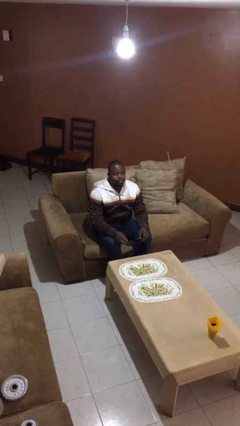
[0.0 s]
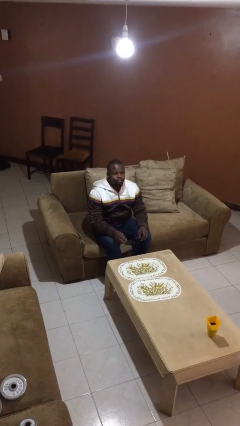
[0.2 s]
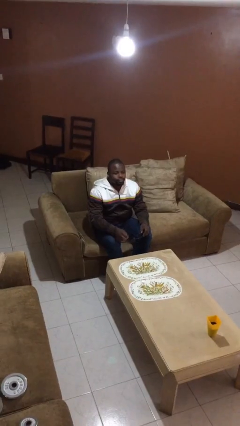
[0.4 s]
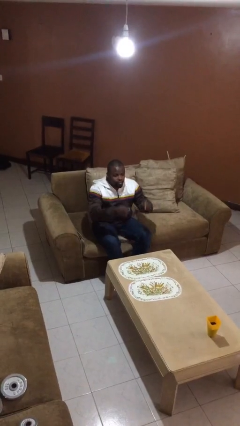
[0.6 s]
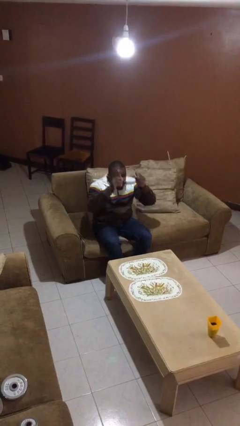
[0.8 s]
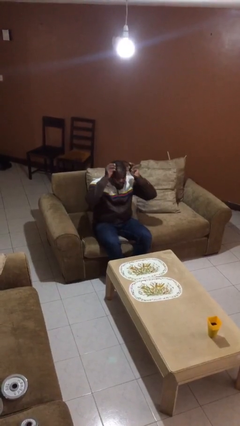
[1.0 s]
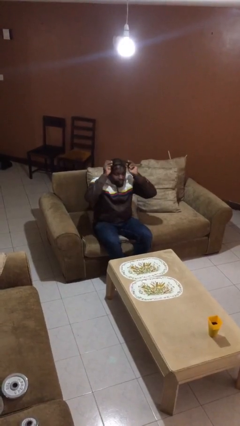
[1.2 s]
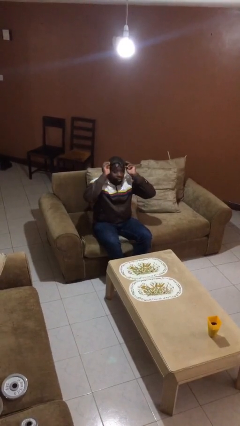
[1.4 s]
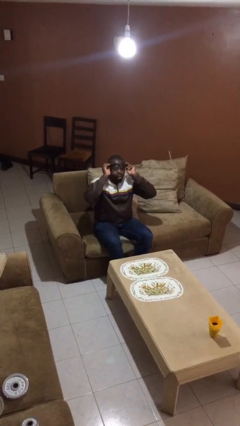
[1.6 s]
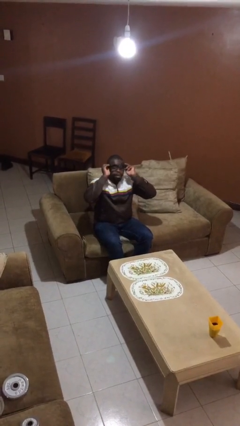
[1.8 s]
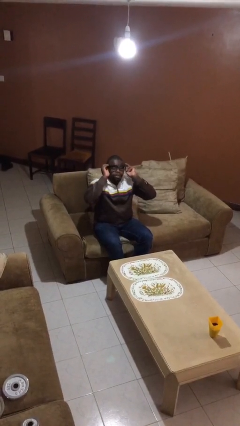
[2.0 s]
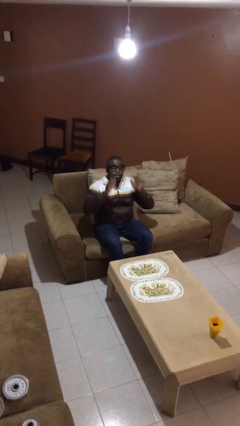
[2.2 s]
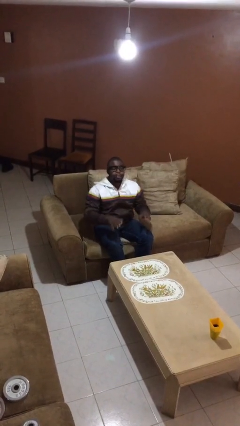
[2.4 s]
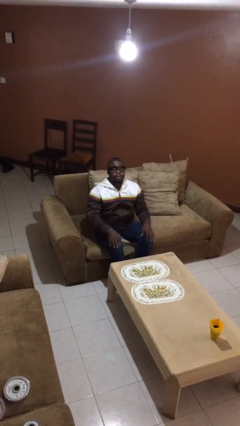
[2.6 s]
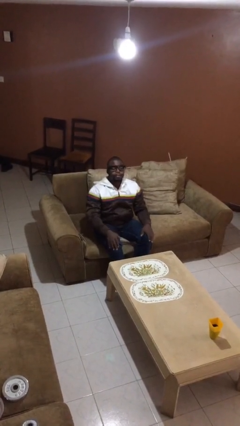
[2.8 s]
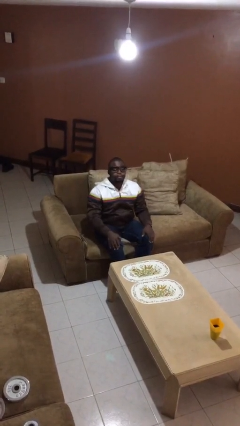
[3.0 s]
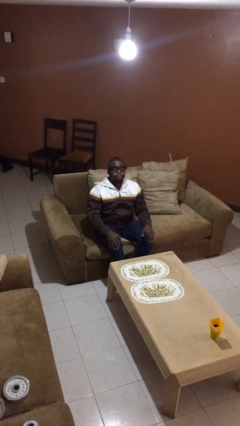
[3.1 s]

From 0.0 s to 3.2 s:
person puts on glasses

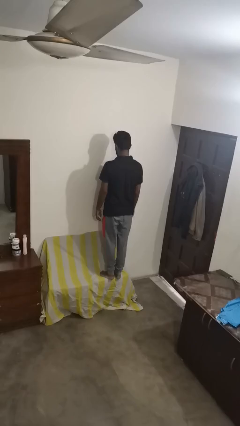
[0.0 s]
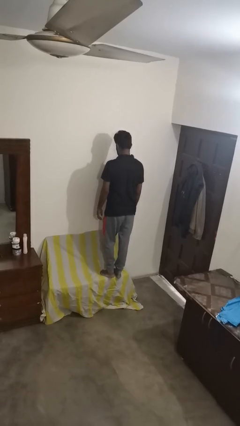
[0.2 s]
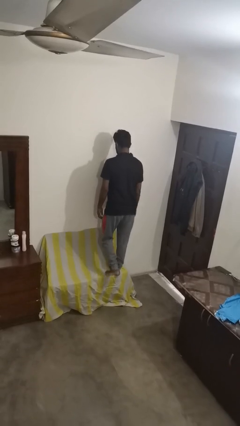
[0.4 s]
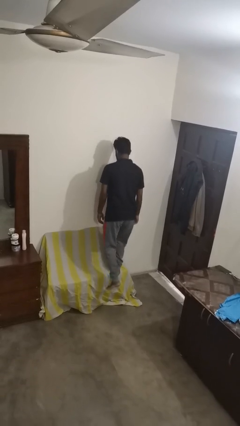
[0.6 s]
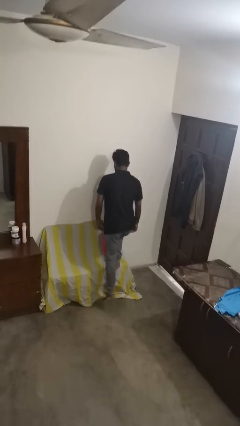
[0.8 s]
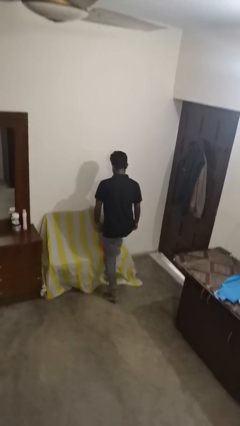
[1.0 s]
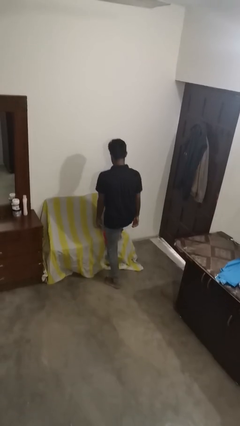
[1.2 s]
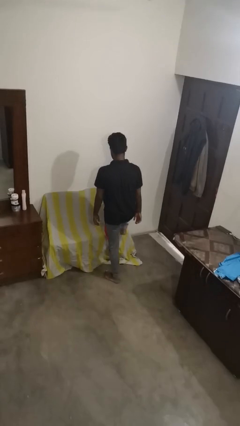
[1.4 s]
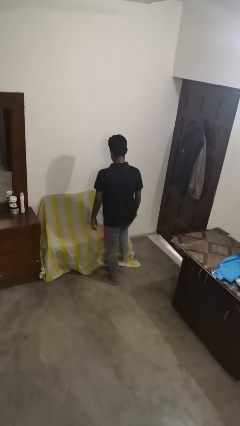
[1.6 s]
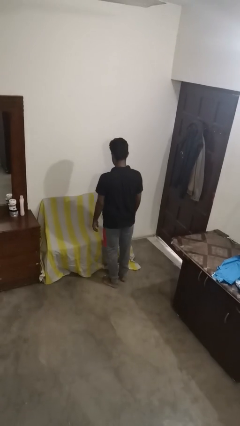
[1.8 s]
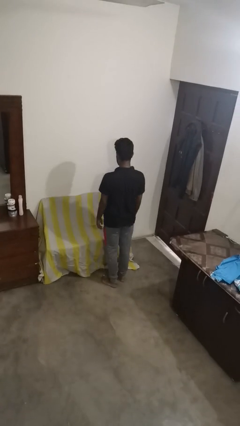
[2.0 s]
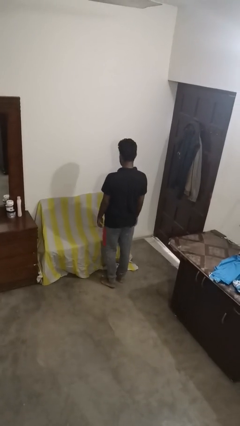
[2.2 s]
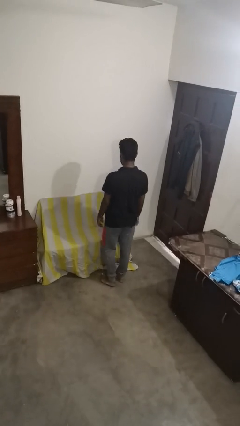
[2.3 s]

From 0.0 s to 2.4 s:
person climbs off couch

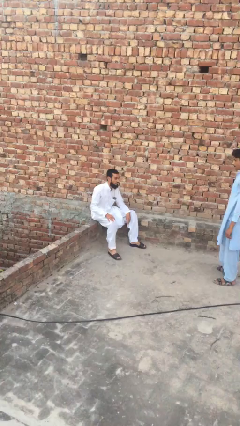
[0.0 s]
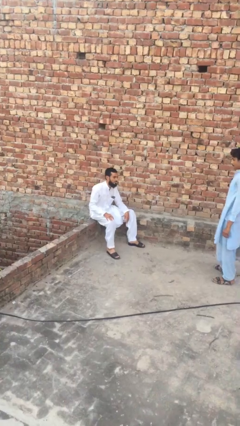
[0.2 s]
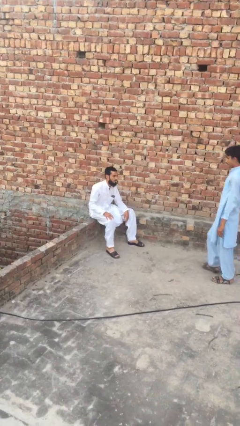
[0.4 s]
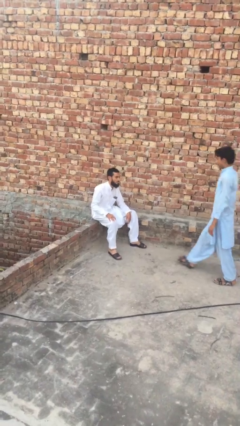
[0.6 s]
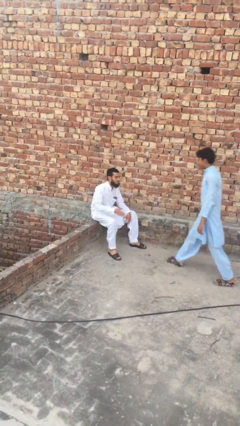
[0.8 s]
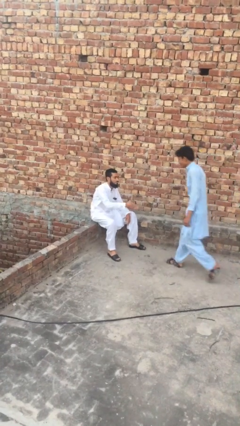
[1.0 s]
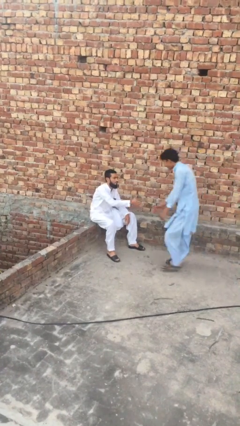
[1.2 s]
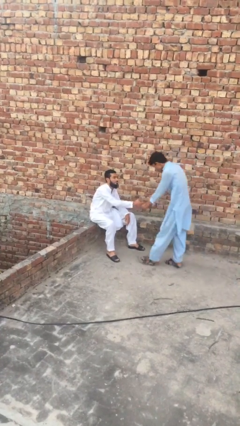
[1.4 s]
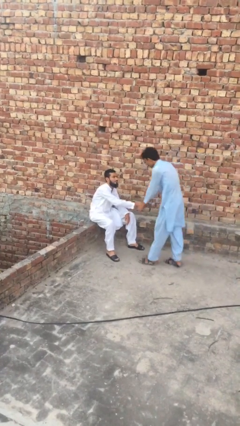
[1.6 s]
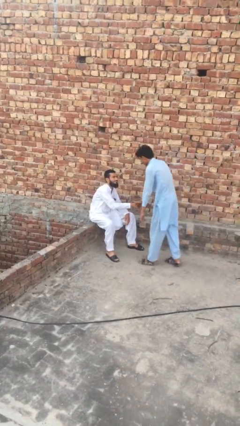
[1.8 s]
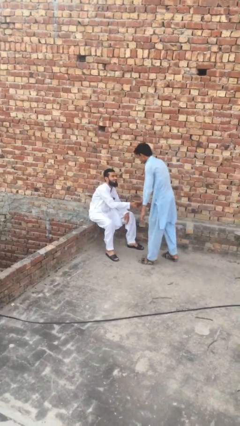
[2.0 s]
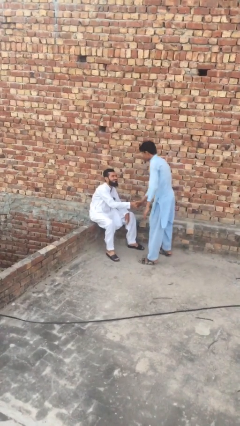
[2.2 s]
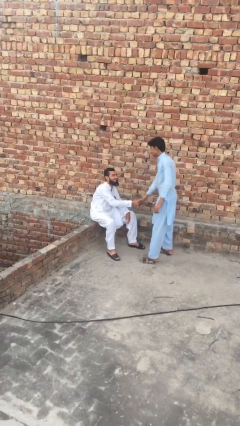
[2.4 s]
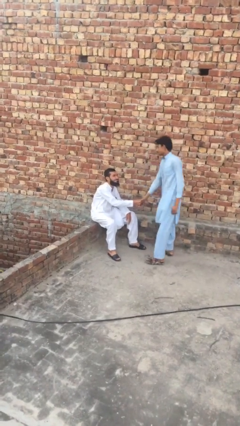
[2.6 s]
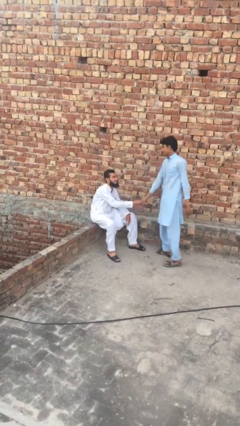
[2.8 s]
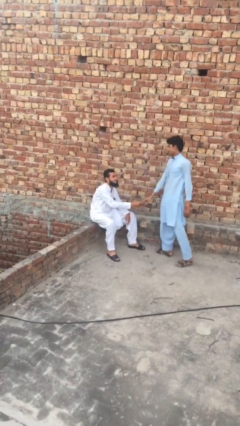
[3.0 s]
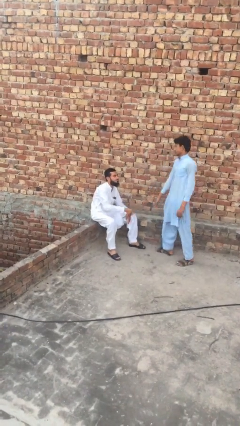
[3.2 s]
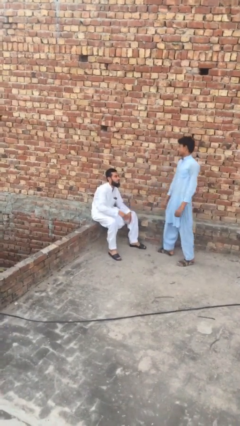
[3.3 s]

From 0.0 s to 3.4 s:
person shakes hand

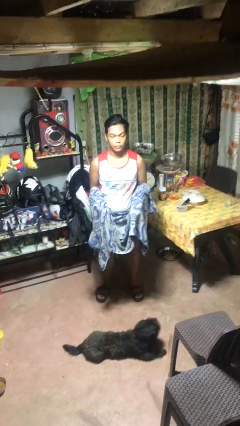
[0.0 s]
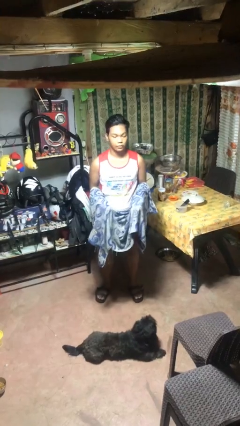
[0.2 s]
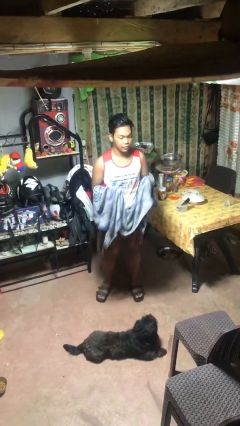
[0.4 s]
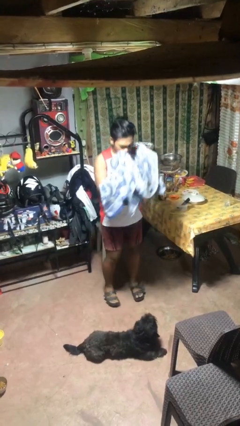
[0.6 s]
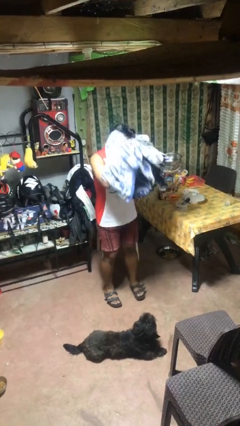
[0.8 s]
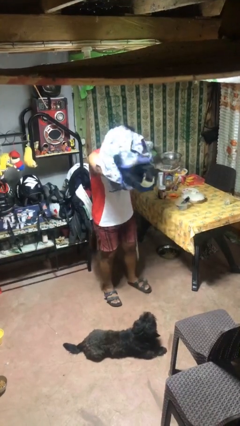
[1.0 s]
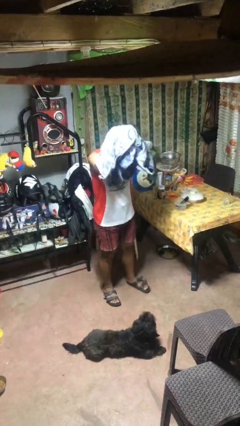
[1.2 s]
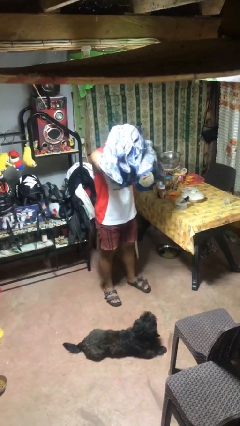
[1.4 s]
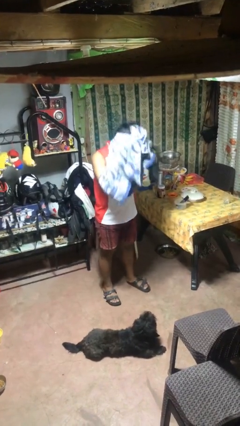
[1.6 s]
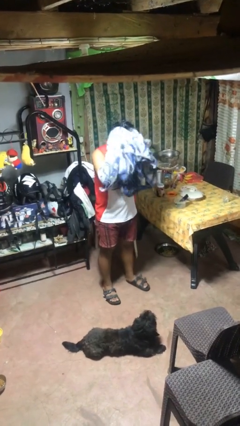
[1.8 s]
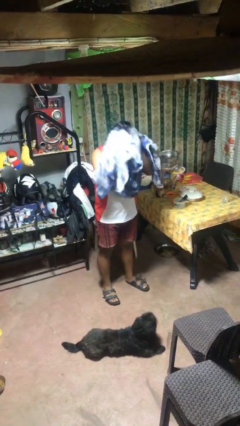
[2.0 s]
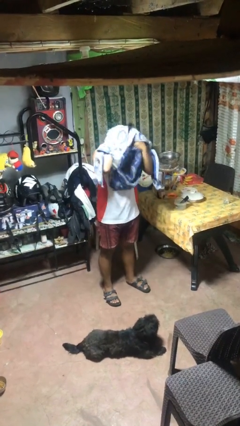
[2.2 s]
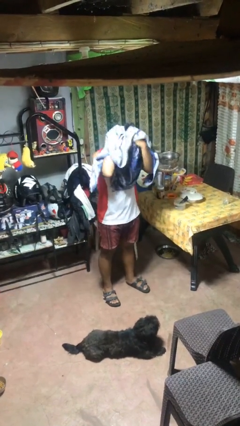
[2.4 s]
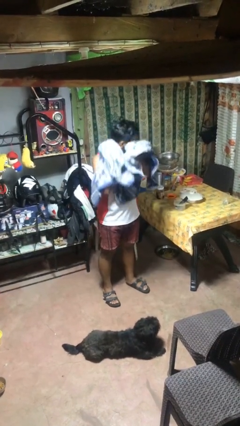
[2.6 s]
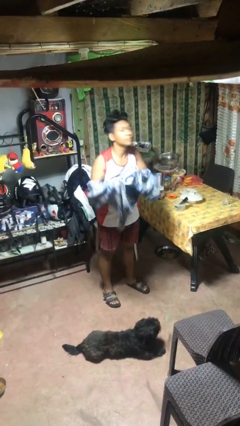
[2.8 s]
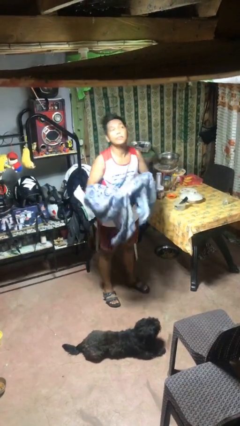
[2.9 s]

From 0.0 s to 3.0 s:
person dries hair with towel

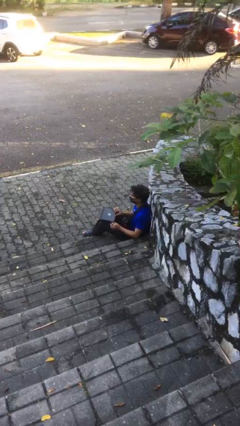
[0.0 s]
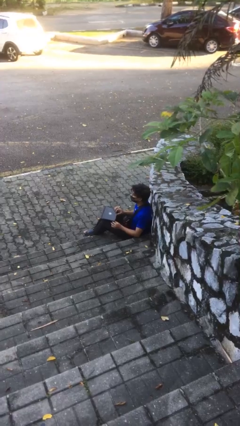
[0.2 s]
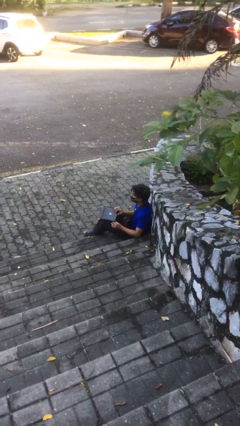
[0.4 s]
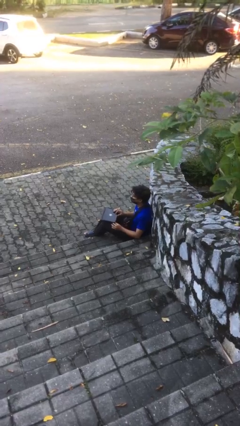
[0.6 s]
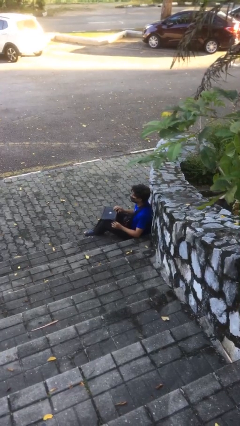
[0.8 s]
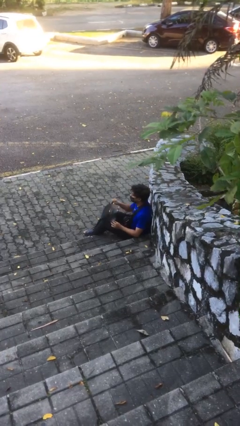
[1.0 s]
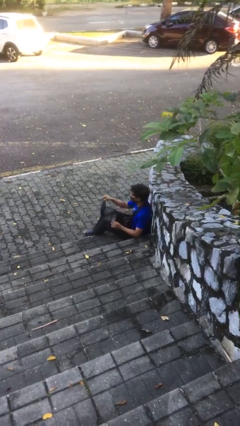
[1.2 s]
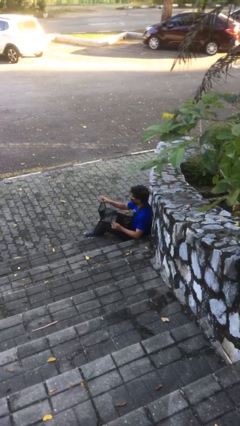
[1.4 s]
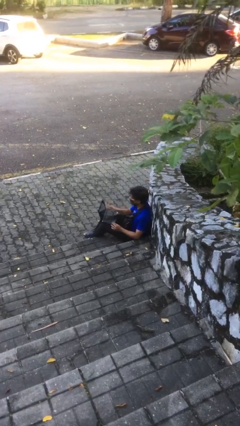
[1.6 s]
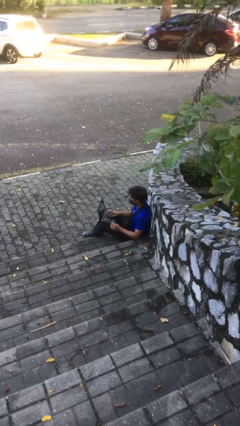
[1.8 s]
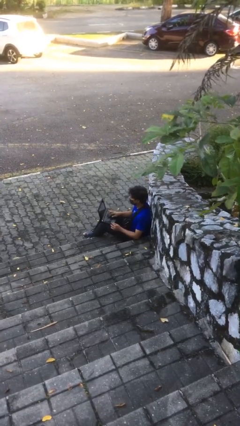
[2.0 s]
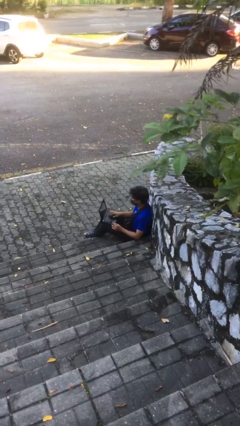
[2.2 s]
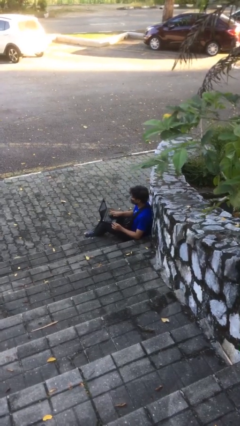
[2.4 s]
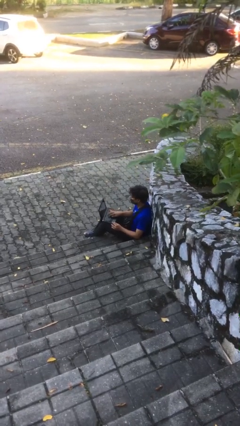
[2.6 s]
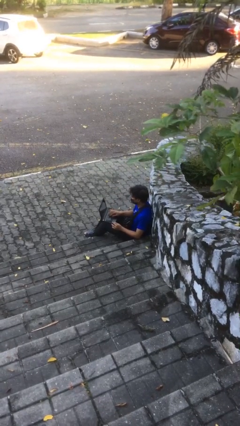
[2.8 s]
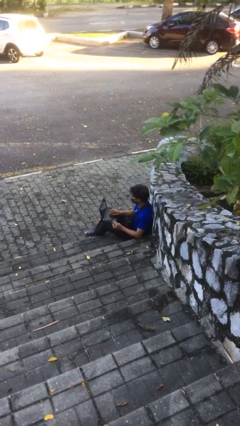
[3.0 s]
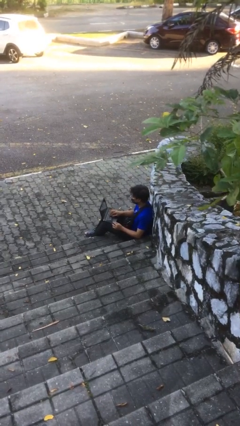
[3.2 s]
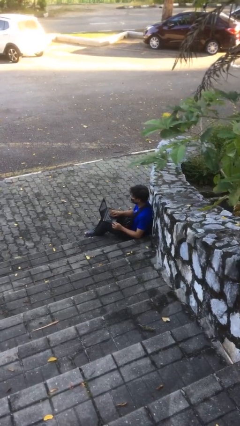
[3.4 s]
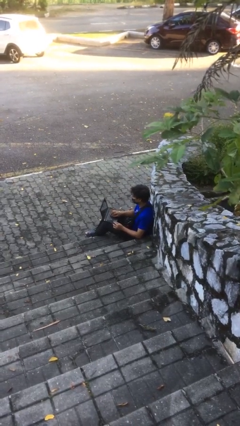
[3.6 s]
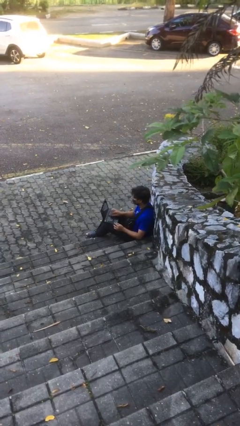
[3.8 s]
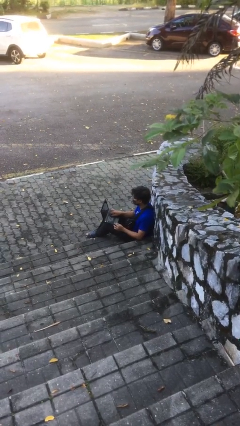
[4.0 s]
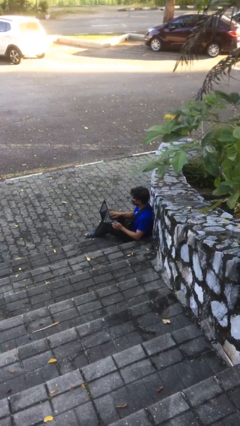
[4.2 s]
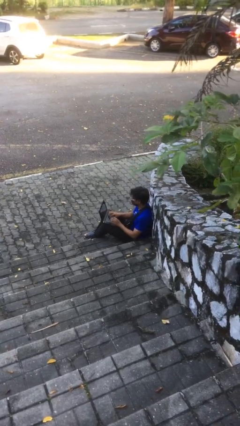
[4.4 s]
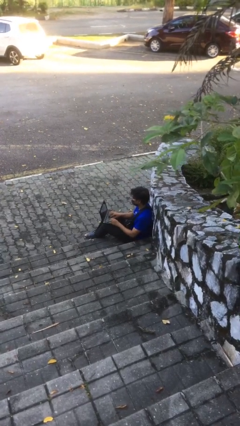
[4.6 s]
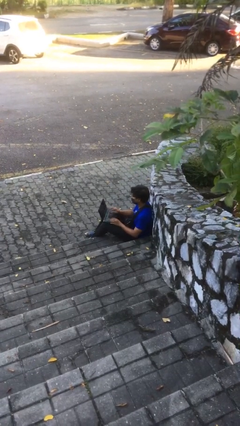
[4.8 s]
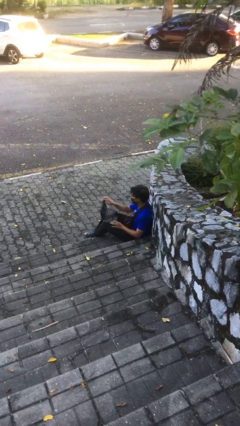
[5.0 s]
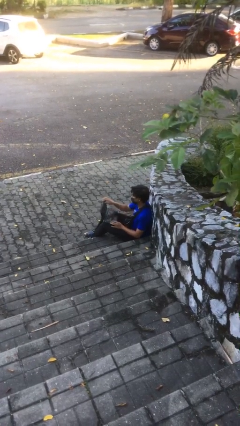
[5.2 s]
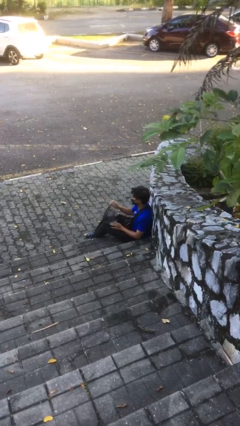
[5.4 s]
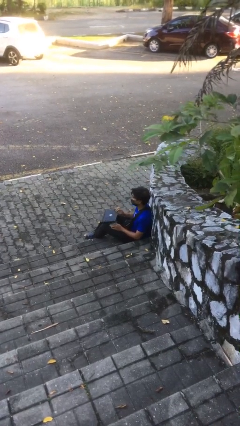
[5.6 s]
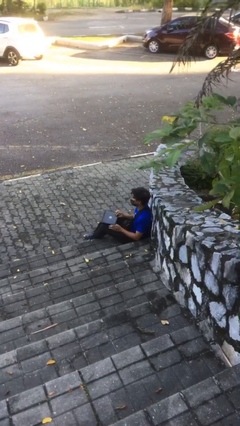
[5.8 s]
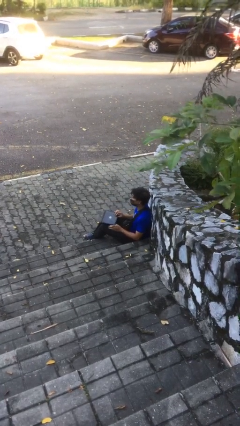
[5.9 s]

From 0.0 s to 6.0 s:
person interacts with laptop
